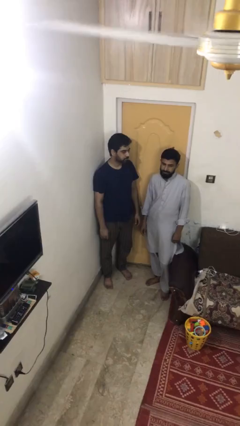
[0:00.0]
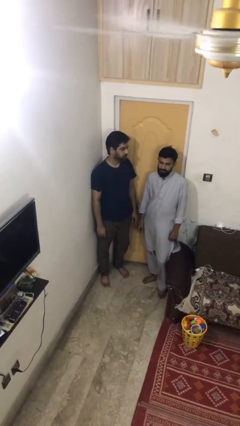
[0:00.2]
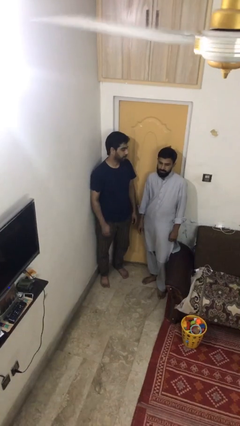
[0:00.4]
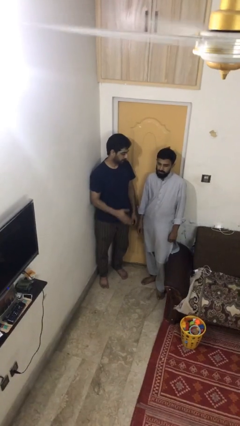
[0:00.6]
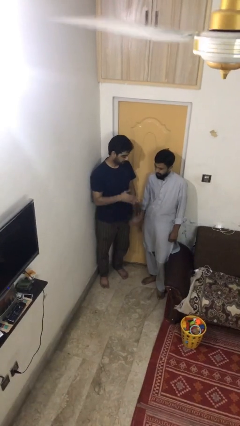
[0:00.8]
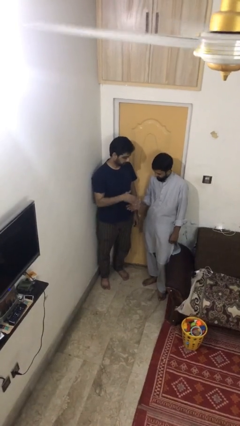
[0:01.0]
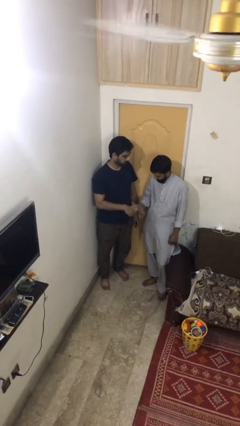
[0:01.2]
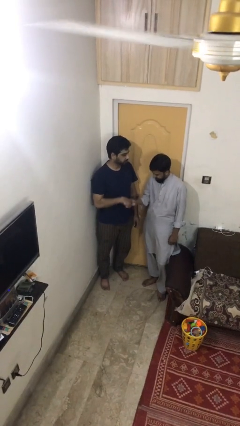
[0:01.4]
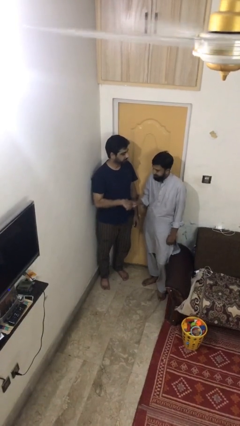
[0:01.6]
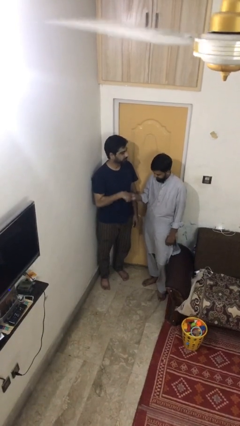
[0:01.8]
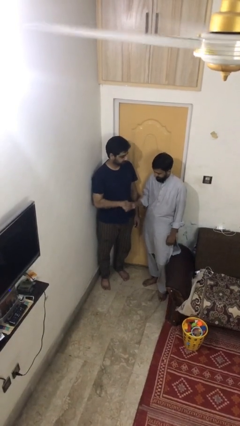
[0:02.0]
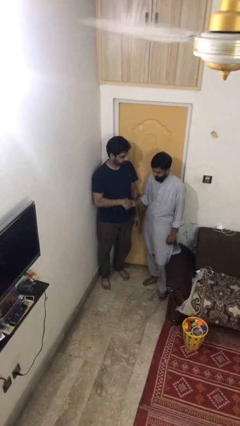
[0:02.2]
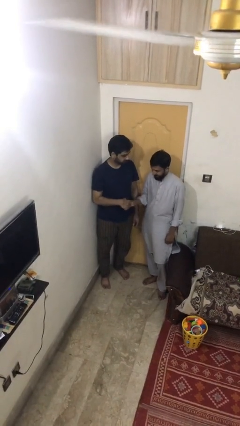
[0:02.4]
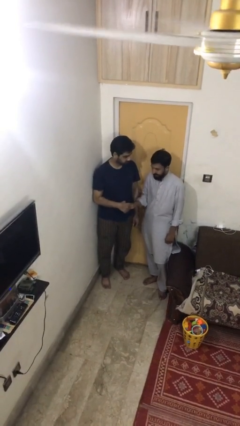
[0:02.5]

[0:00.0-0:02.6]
person shakes hand

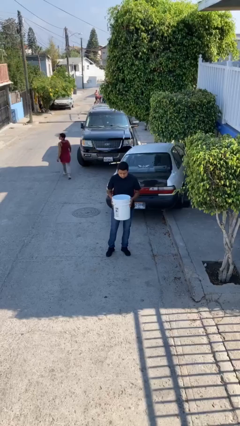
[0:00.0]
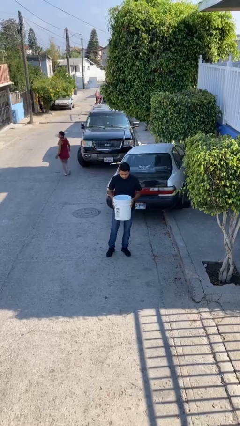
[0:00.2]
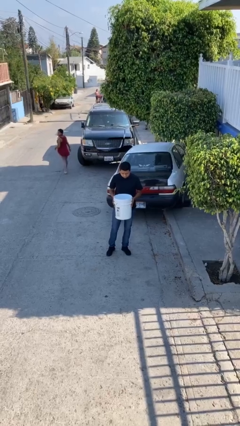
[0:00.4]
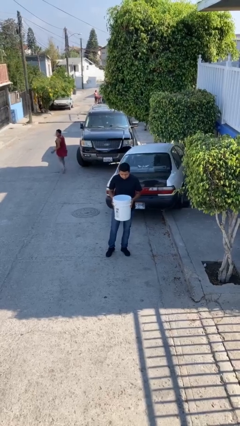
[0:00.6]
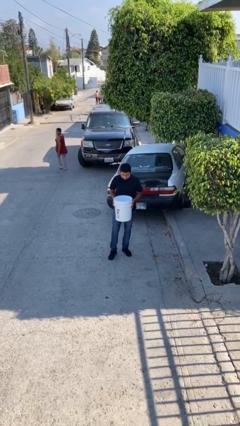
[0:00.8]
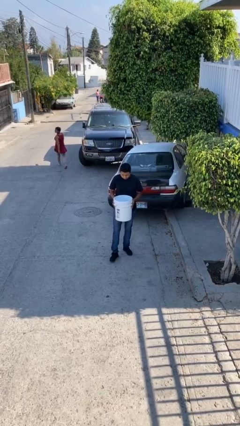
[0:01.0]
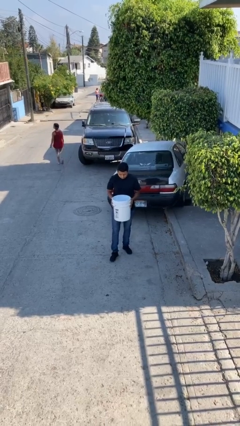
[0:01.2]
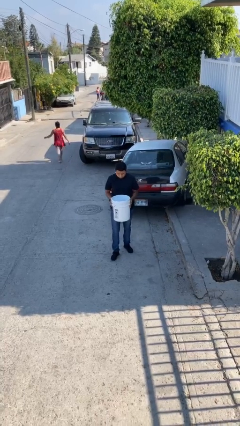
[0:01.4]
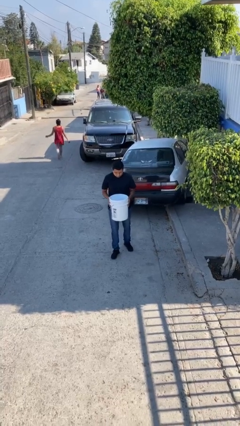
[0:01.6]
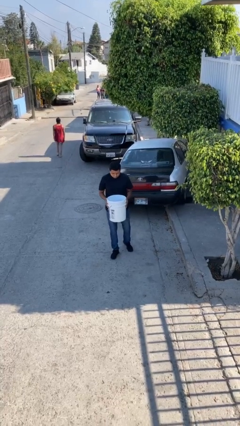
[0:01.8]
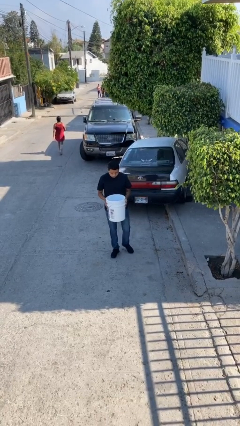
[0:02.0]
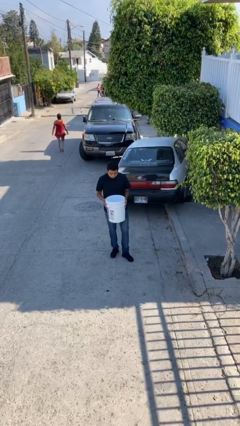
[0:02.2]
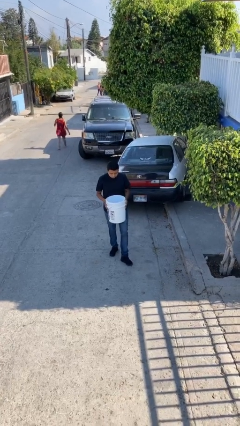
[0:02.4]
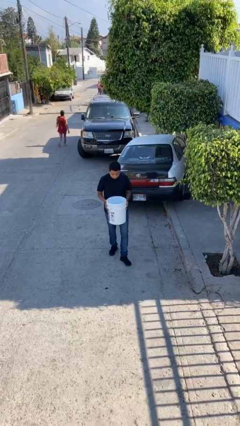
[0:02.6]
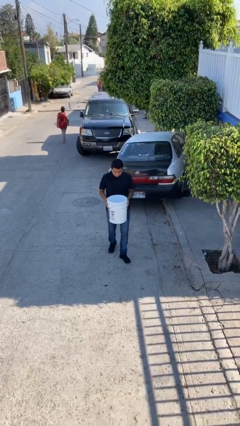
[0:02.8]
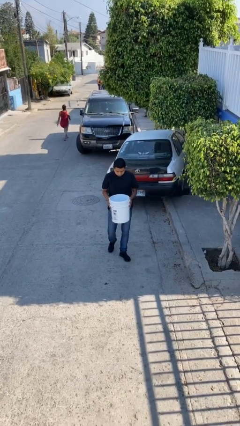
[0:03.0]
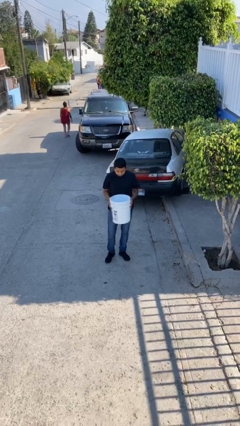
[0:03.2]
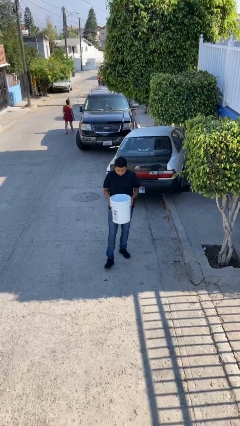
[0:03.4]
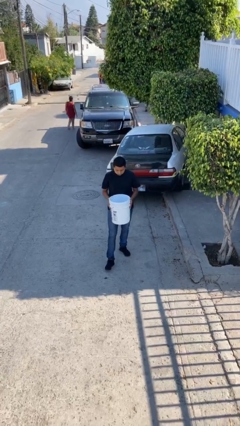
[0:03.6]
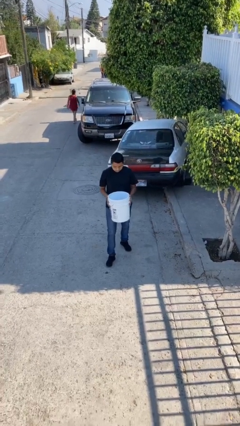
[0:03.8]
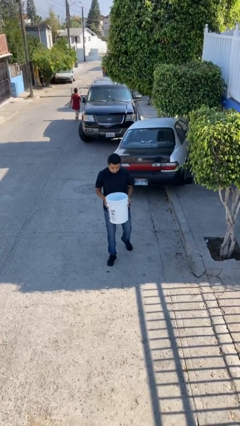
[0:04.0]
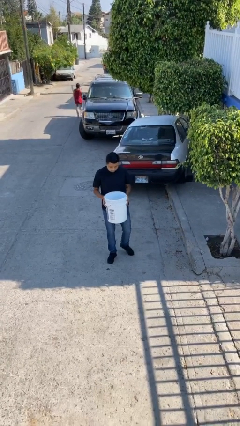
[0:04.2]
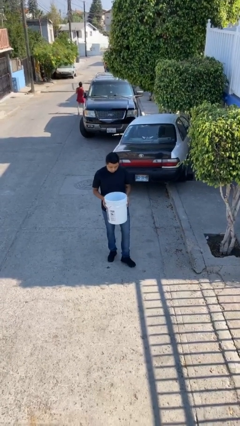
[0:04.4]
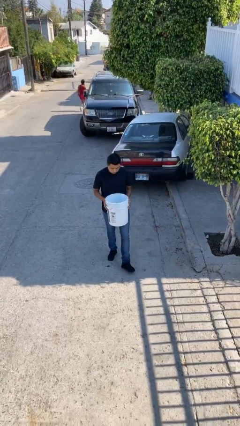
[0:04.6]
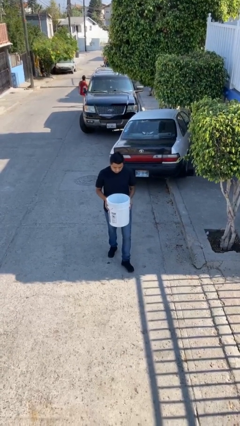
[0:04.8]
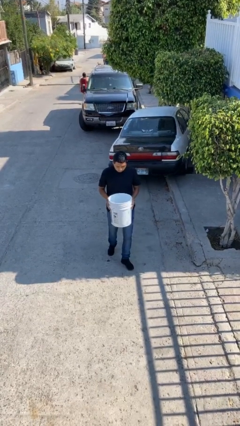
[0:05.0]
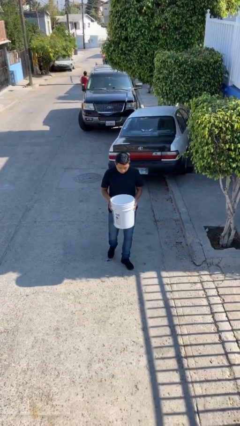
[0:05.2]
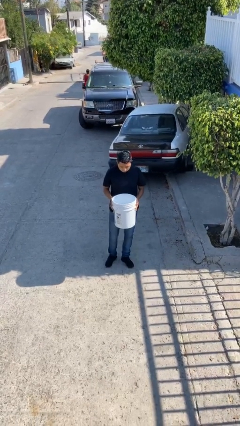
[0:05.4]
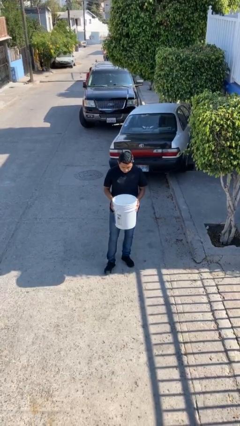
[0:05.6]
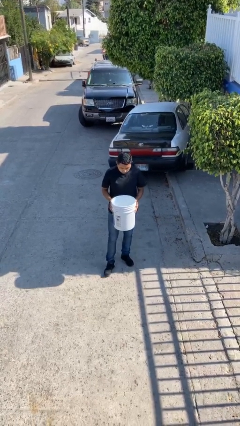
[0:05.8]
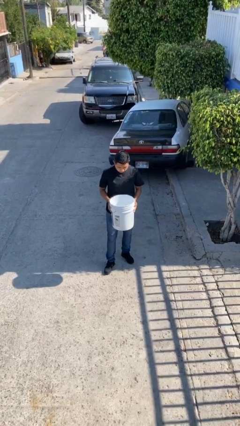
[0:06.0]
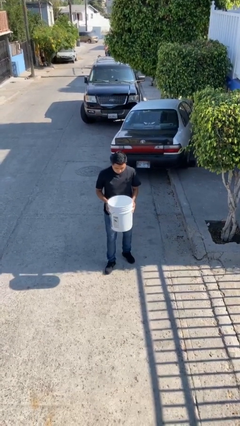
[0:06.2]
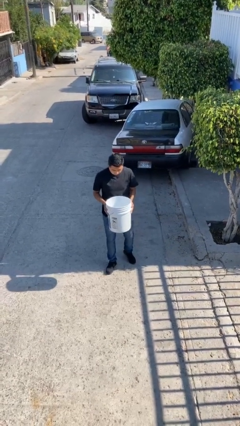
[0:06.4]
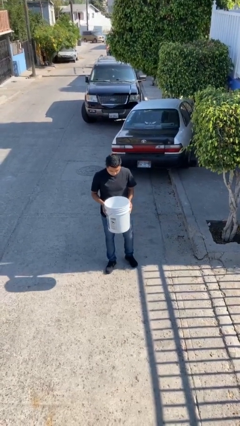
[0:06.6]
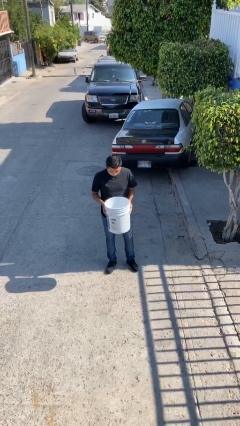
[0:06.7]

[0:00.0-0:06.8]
person carries heavy object

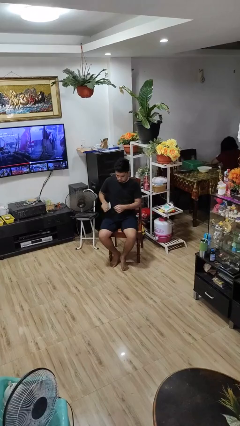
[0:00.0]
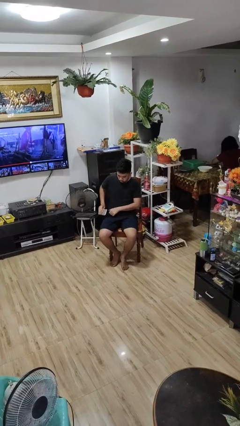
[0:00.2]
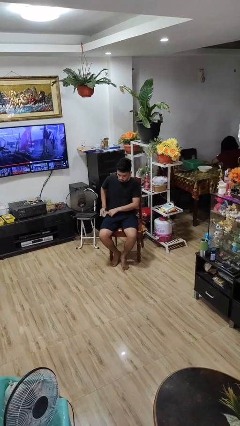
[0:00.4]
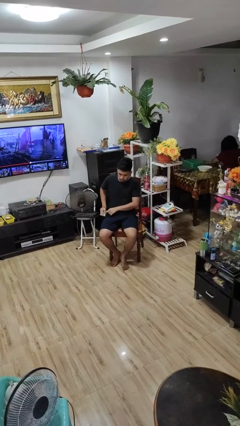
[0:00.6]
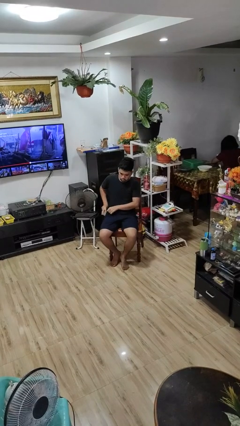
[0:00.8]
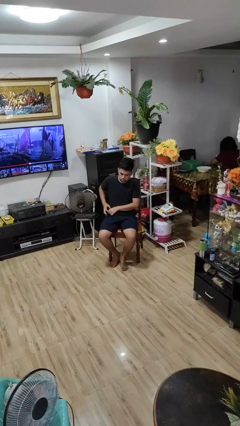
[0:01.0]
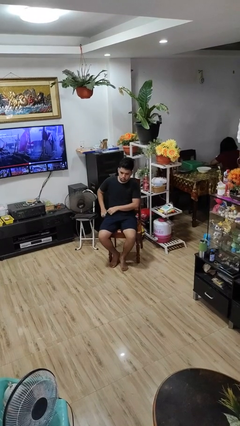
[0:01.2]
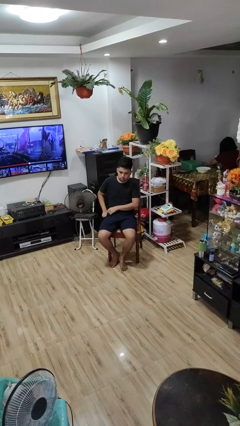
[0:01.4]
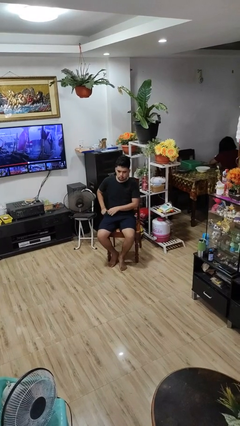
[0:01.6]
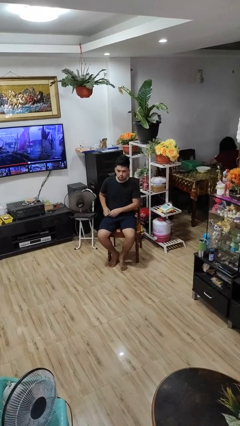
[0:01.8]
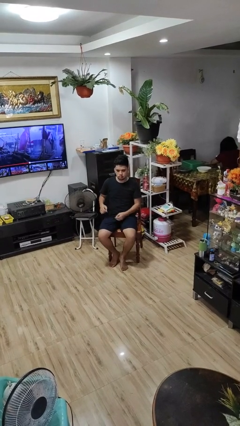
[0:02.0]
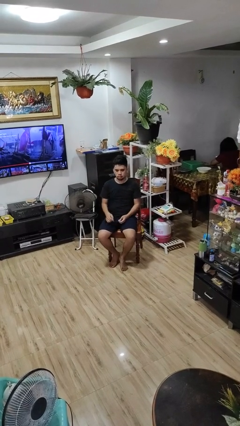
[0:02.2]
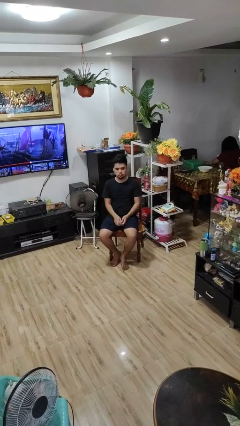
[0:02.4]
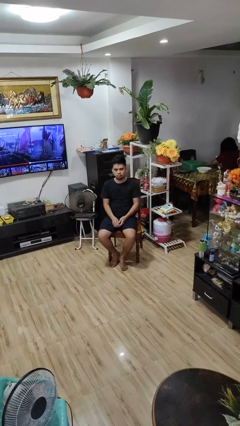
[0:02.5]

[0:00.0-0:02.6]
person puts phone into pocket

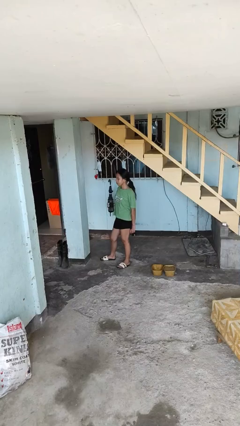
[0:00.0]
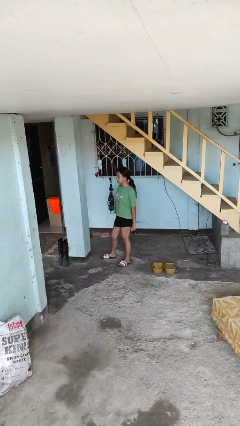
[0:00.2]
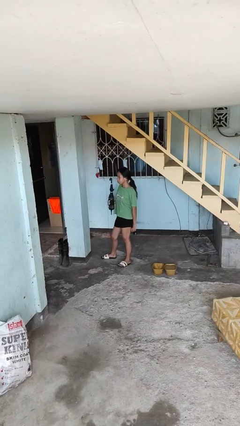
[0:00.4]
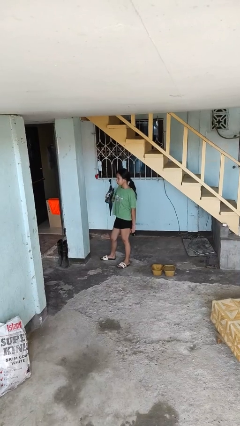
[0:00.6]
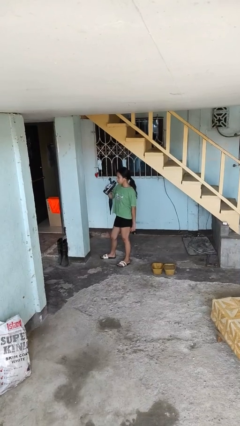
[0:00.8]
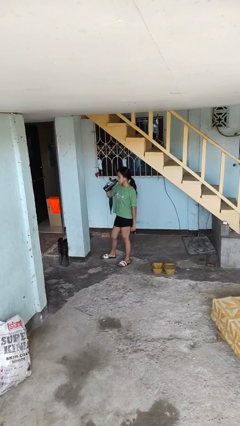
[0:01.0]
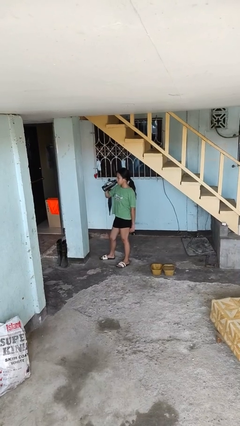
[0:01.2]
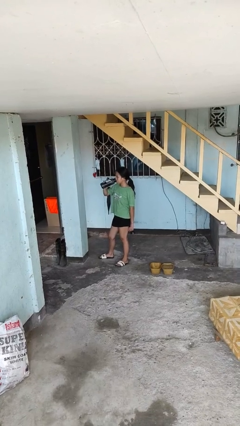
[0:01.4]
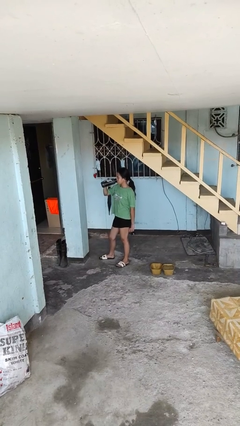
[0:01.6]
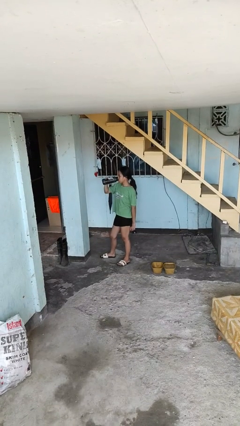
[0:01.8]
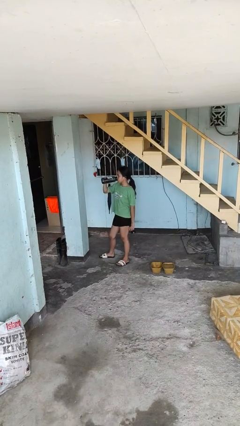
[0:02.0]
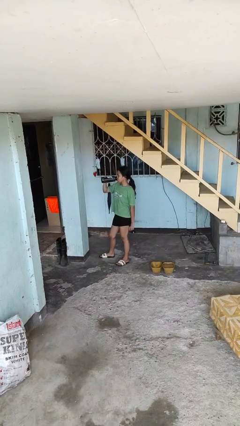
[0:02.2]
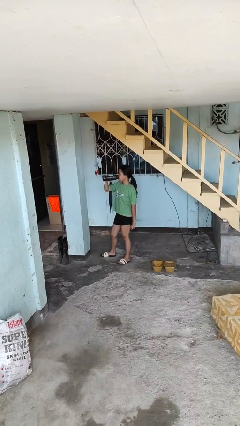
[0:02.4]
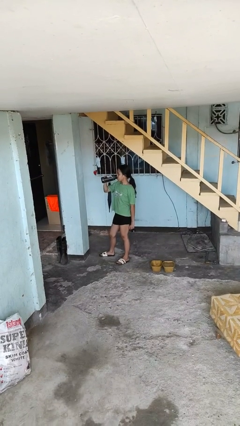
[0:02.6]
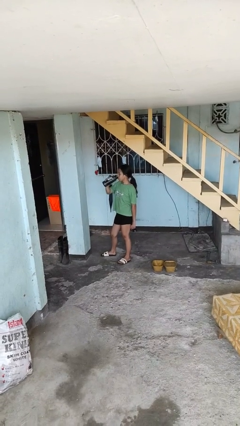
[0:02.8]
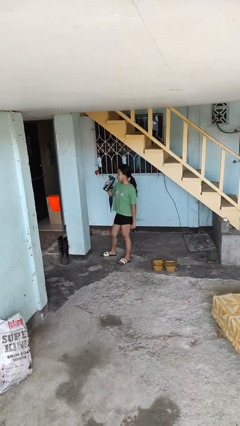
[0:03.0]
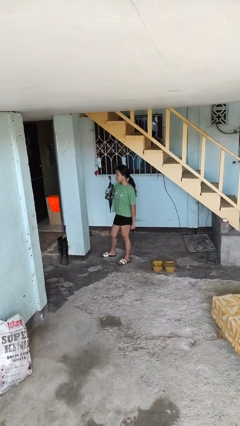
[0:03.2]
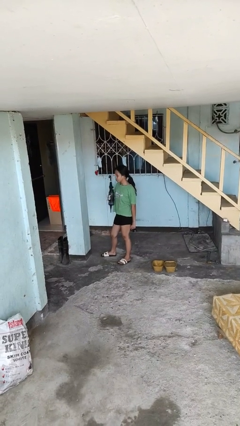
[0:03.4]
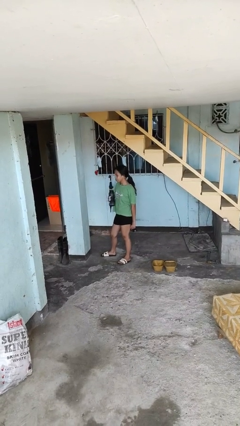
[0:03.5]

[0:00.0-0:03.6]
person drinks from bottle

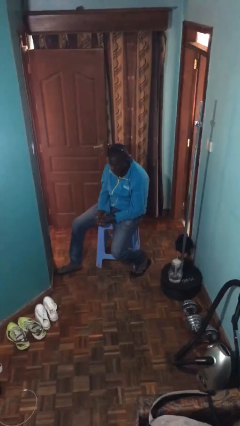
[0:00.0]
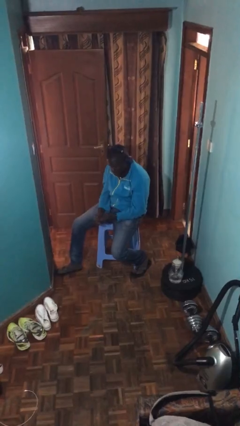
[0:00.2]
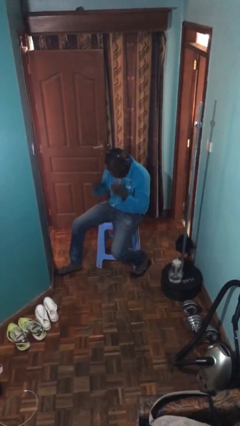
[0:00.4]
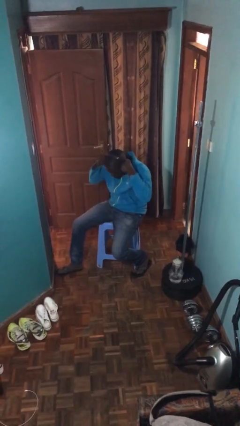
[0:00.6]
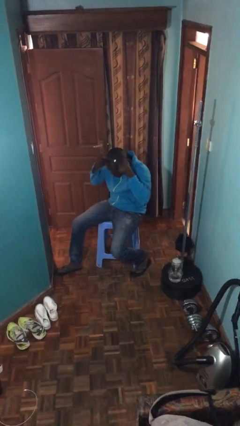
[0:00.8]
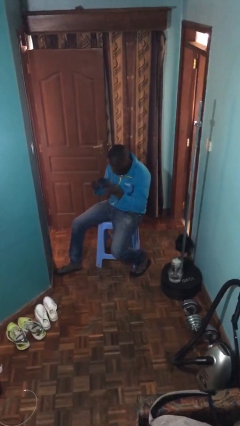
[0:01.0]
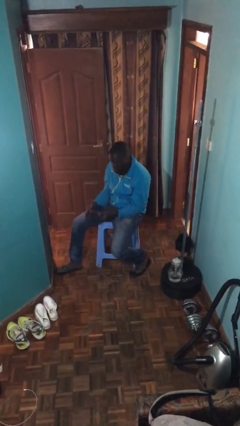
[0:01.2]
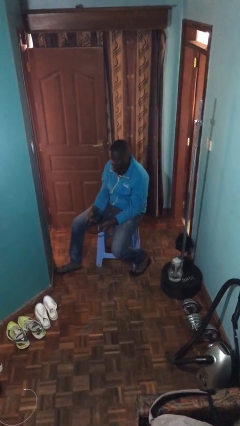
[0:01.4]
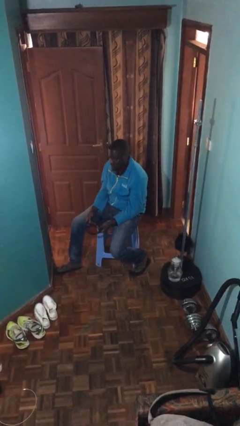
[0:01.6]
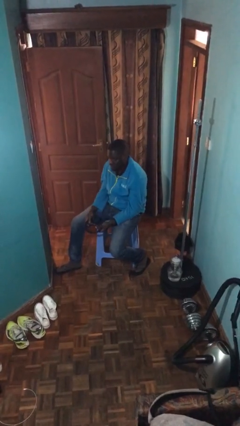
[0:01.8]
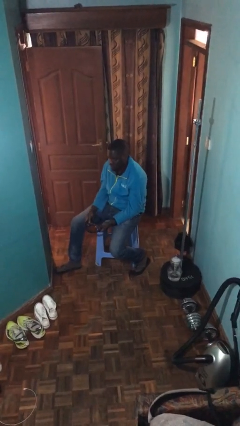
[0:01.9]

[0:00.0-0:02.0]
person takes off headphones
